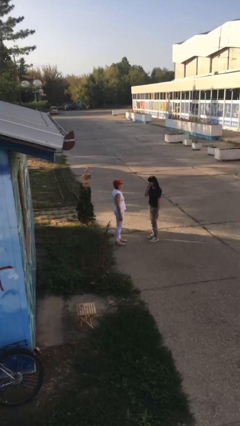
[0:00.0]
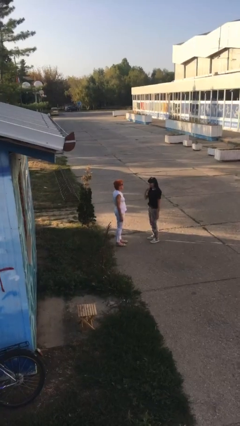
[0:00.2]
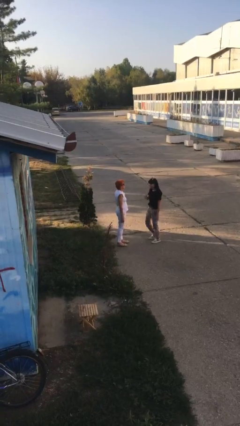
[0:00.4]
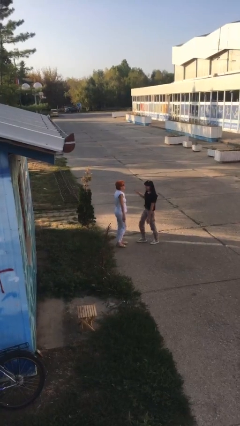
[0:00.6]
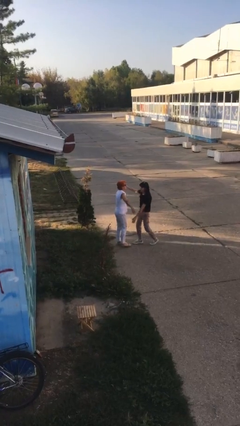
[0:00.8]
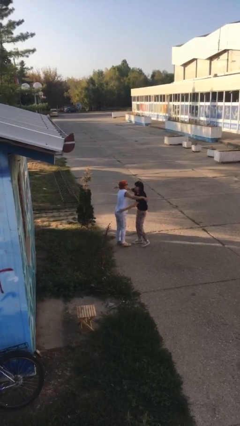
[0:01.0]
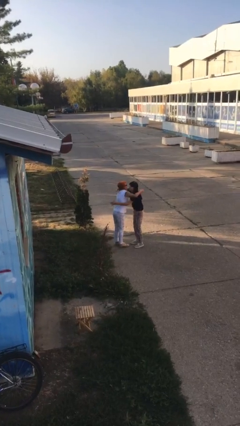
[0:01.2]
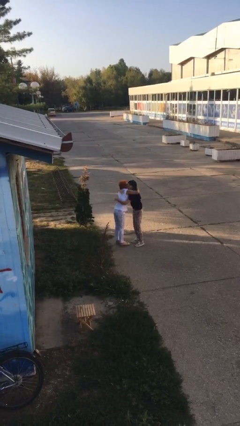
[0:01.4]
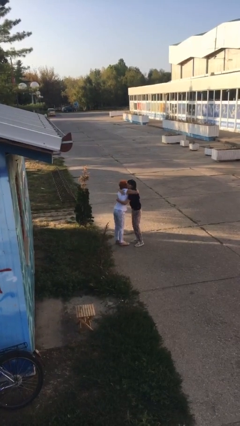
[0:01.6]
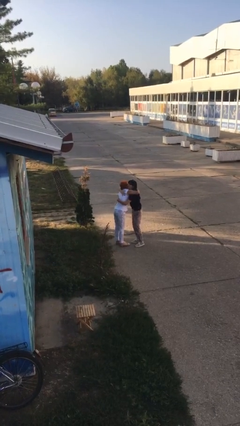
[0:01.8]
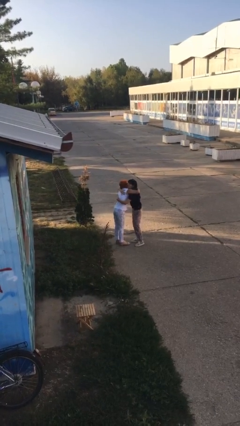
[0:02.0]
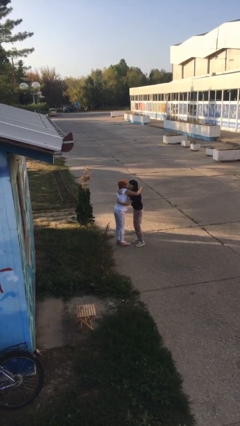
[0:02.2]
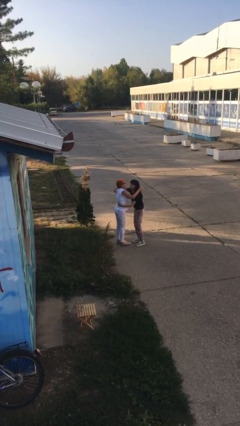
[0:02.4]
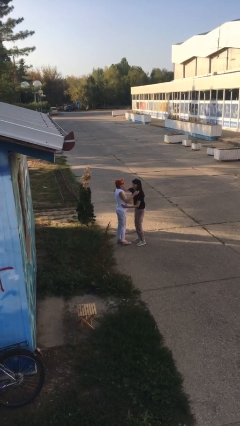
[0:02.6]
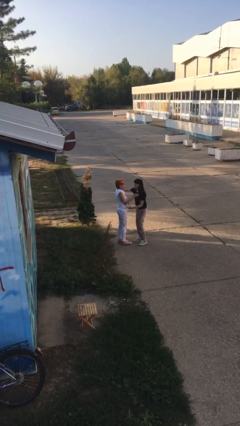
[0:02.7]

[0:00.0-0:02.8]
person embraces person

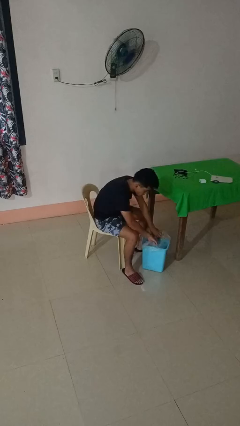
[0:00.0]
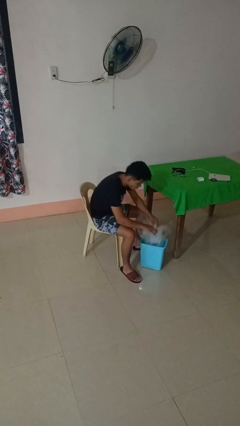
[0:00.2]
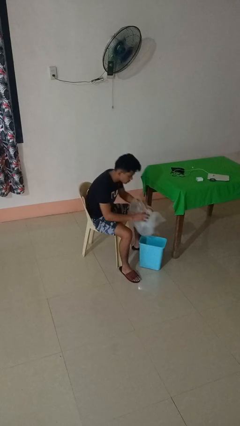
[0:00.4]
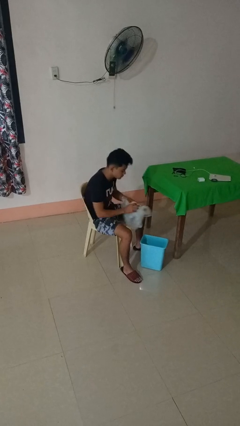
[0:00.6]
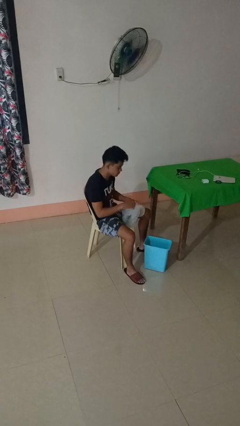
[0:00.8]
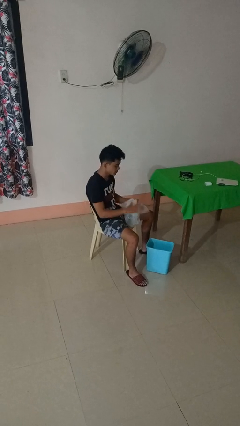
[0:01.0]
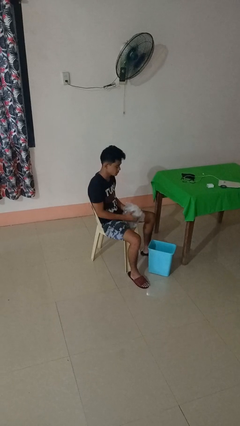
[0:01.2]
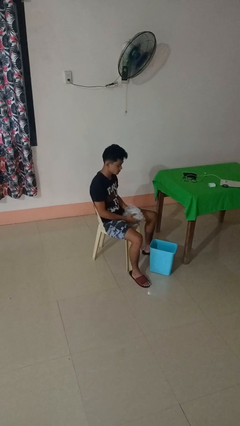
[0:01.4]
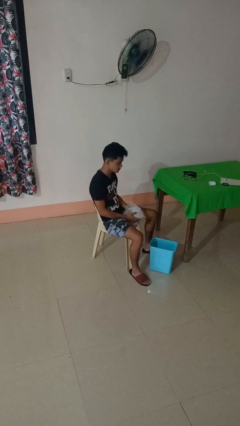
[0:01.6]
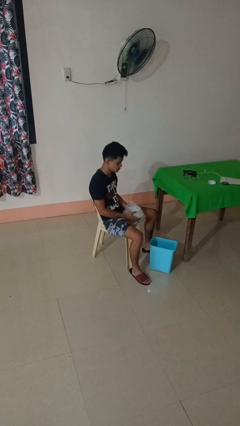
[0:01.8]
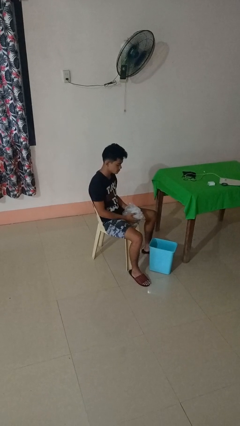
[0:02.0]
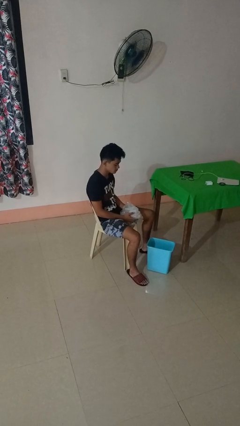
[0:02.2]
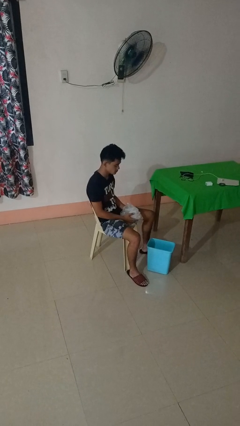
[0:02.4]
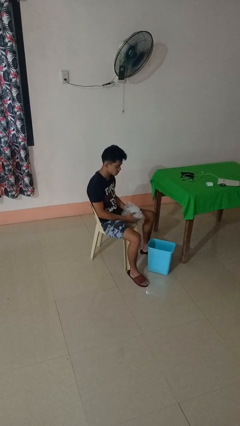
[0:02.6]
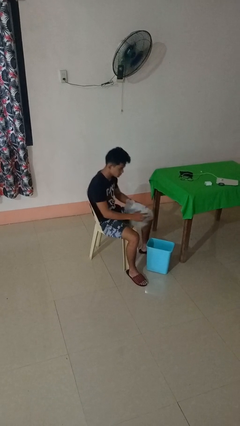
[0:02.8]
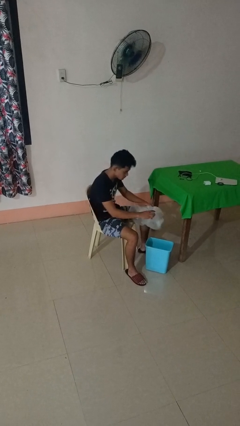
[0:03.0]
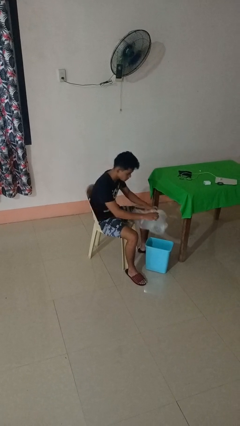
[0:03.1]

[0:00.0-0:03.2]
person removes trashbag from trashcan

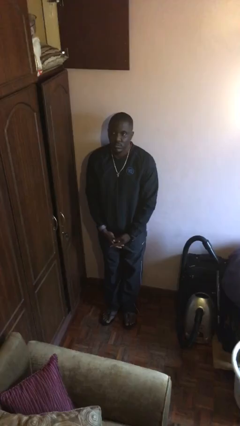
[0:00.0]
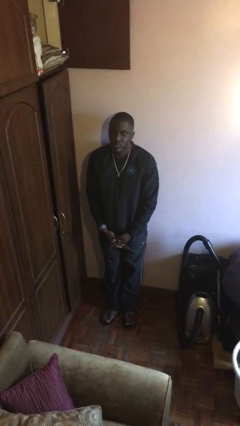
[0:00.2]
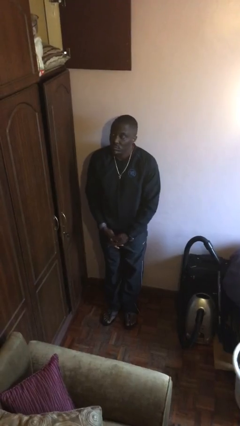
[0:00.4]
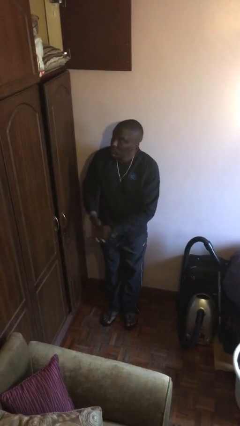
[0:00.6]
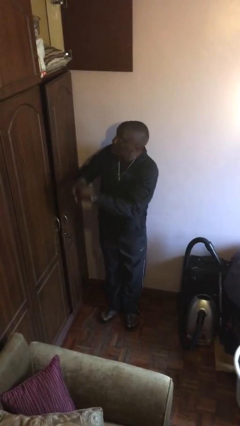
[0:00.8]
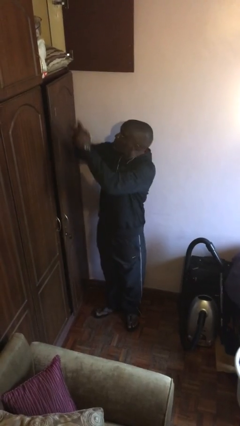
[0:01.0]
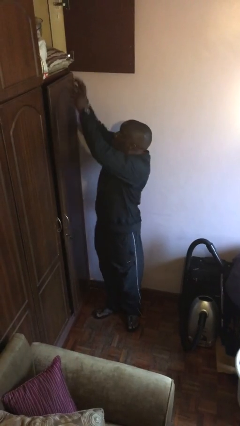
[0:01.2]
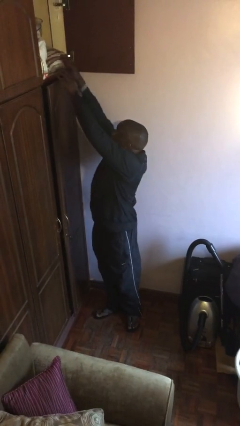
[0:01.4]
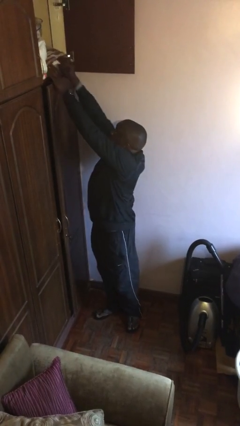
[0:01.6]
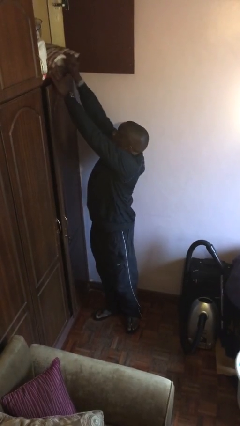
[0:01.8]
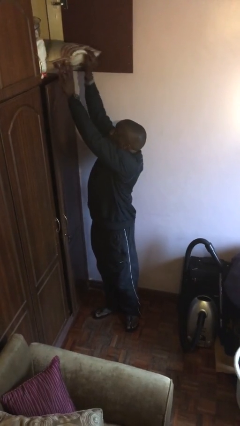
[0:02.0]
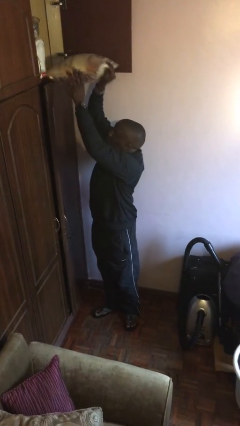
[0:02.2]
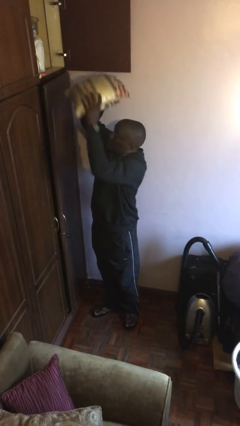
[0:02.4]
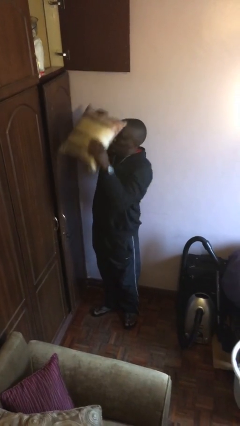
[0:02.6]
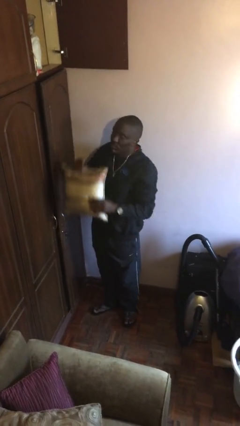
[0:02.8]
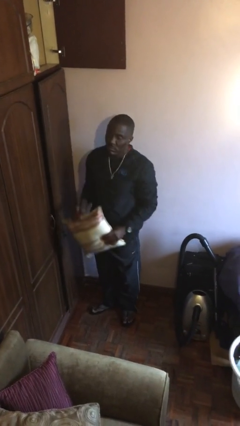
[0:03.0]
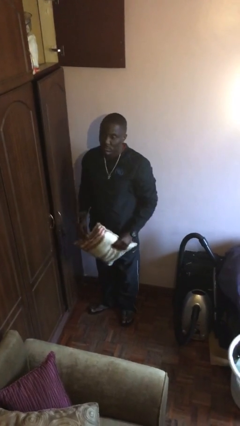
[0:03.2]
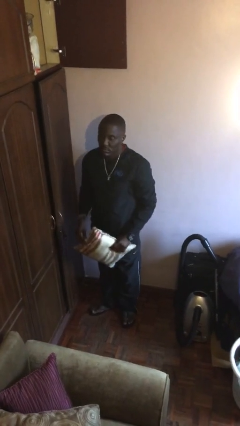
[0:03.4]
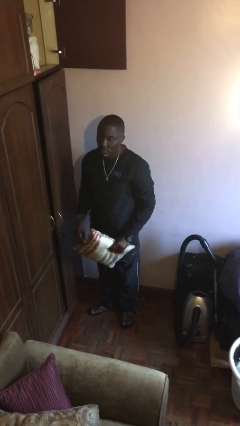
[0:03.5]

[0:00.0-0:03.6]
person picks up object from shelf

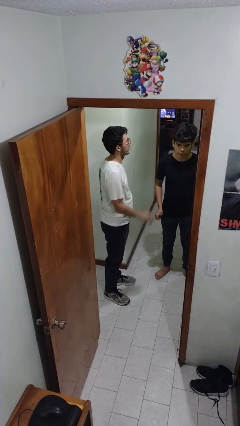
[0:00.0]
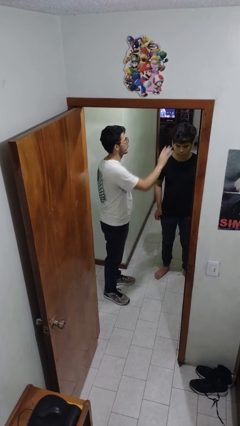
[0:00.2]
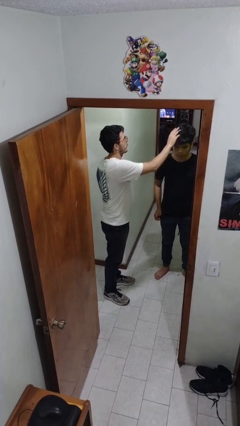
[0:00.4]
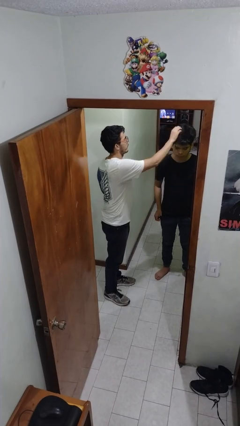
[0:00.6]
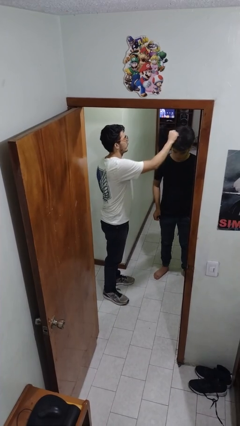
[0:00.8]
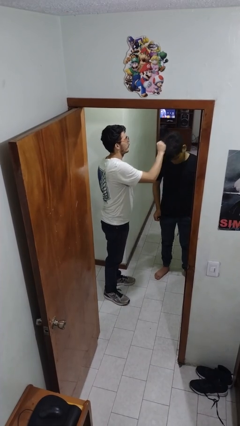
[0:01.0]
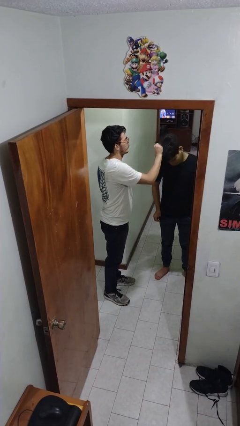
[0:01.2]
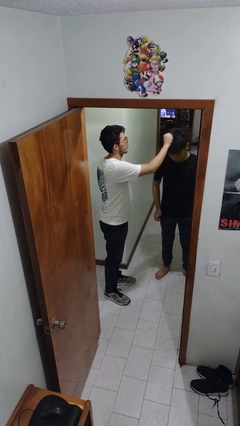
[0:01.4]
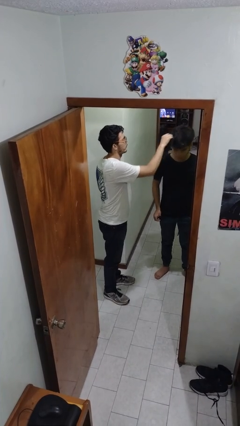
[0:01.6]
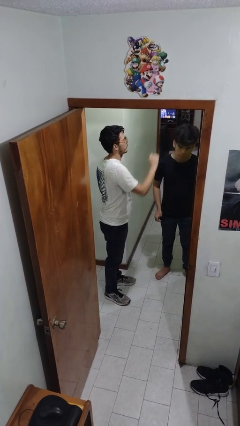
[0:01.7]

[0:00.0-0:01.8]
person grabs person by hair

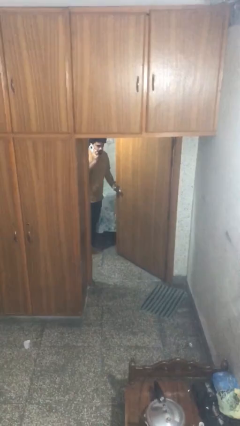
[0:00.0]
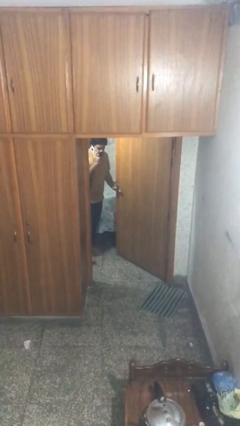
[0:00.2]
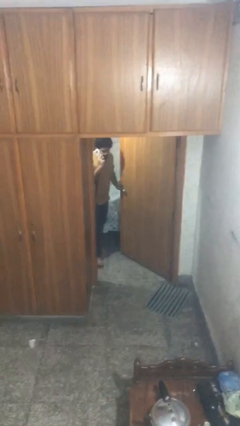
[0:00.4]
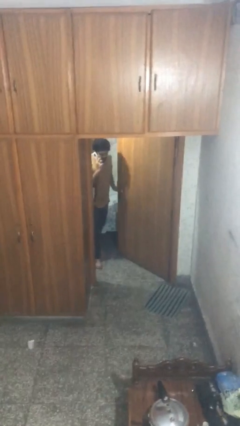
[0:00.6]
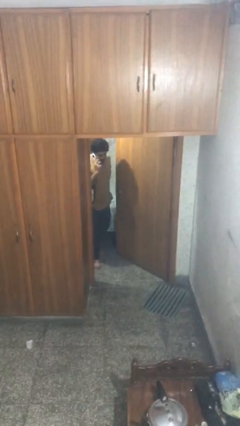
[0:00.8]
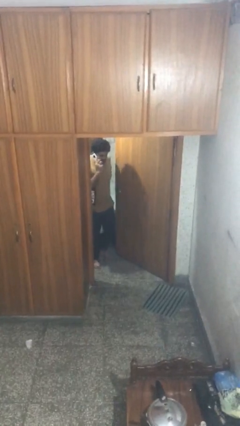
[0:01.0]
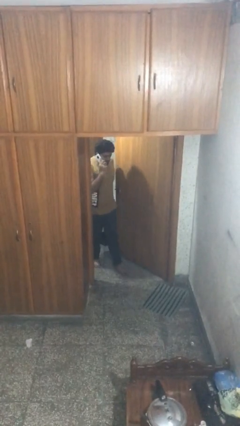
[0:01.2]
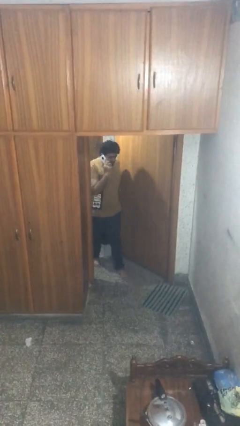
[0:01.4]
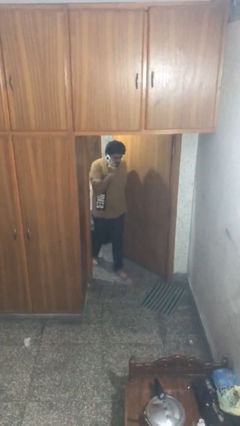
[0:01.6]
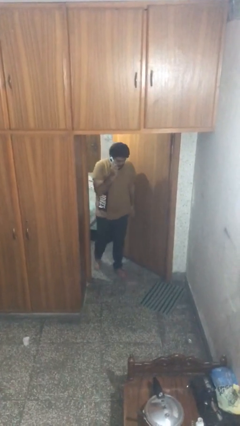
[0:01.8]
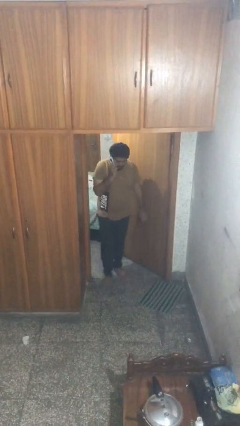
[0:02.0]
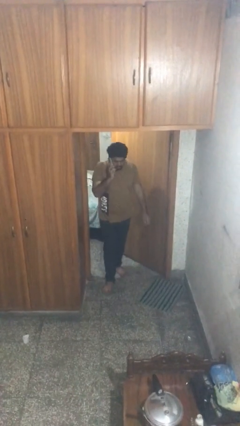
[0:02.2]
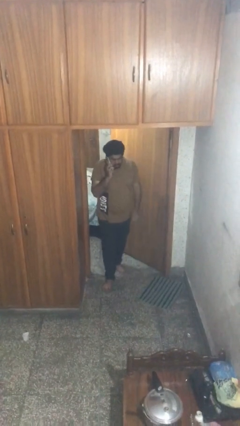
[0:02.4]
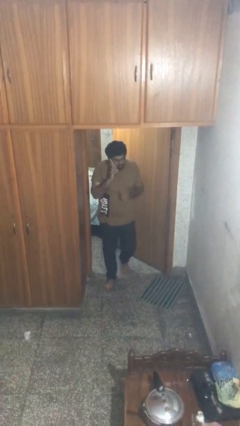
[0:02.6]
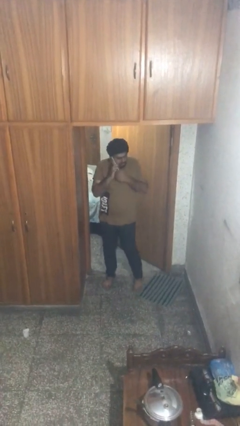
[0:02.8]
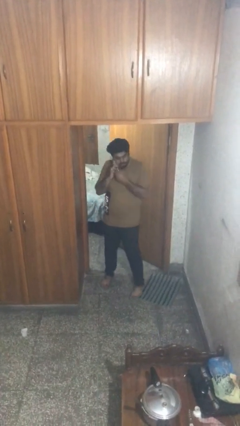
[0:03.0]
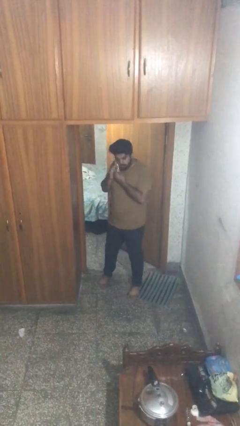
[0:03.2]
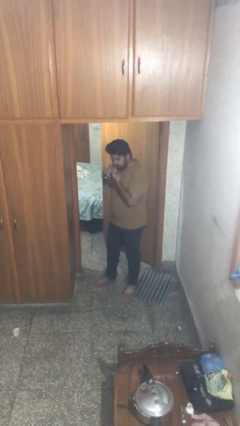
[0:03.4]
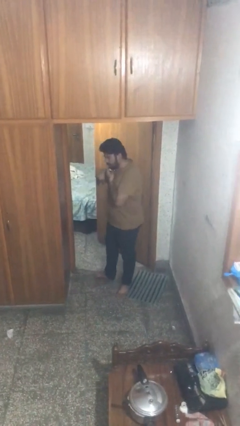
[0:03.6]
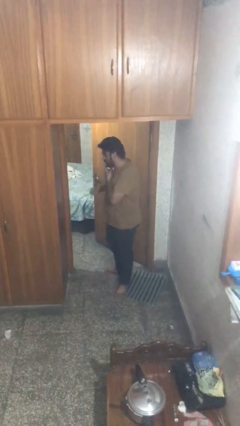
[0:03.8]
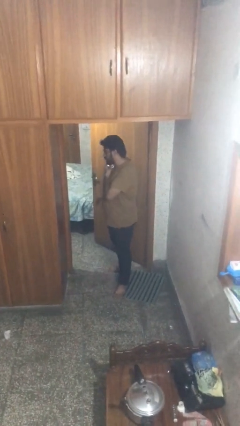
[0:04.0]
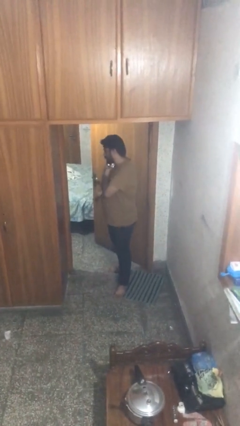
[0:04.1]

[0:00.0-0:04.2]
person enters scene through structure

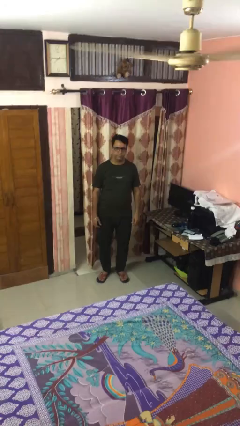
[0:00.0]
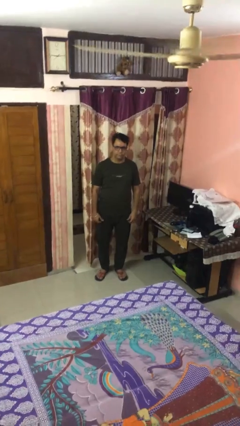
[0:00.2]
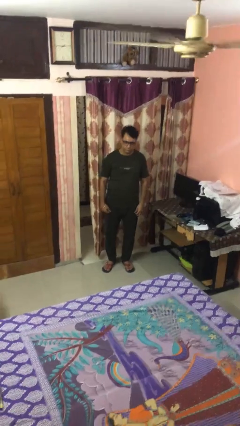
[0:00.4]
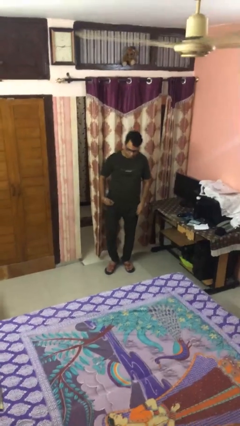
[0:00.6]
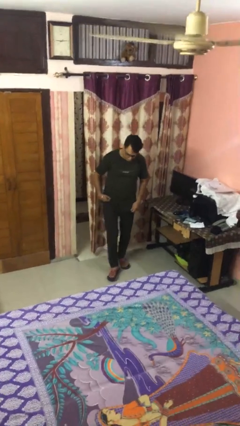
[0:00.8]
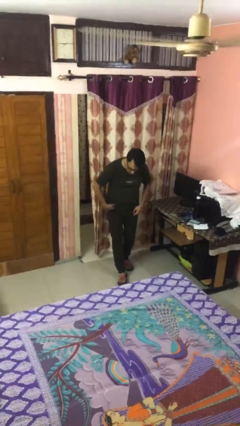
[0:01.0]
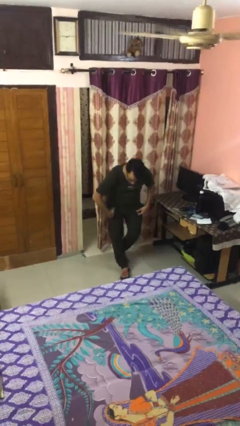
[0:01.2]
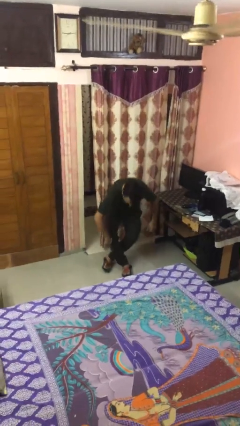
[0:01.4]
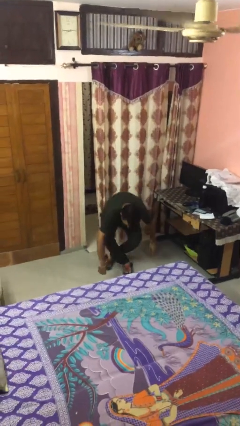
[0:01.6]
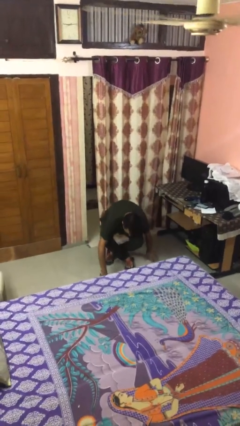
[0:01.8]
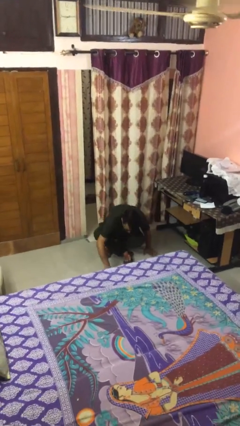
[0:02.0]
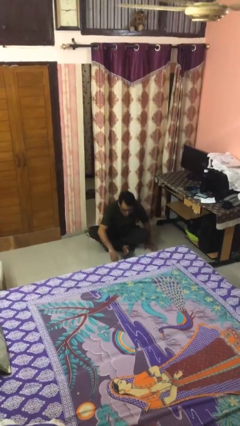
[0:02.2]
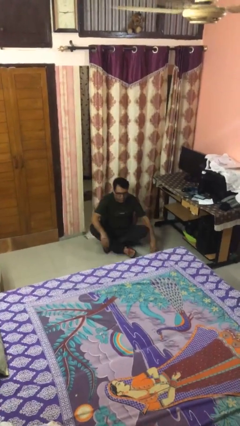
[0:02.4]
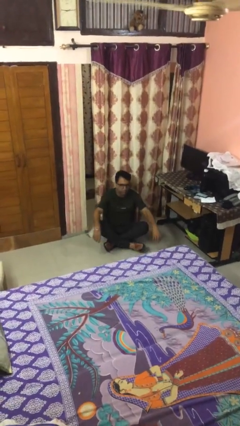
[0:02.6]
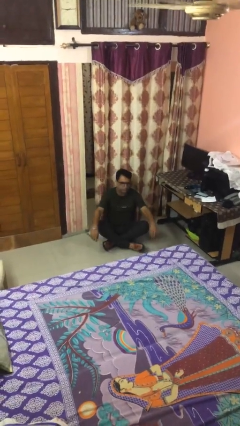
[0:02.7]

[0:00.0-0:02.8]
person sits crisscross
